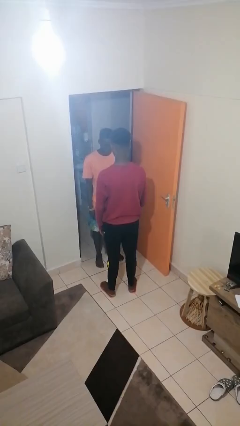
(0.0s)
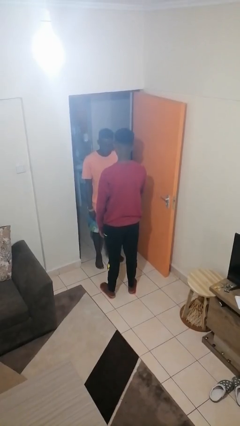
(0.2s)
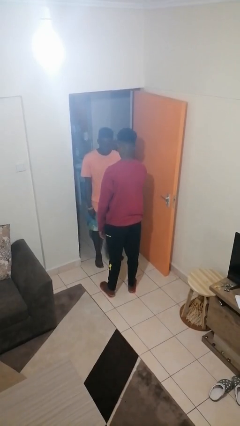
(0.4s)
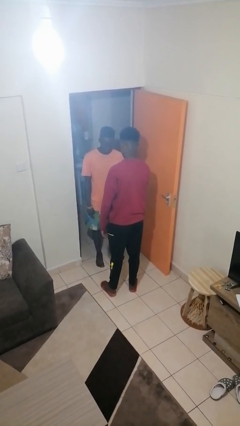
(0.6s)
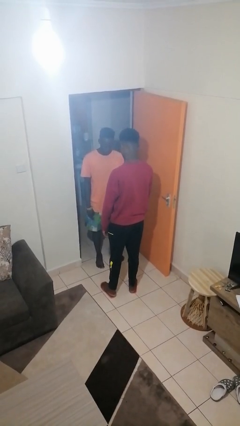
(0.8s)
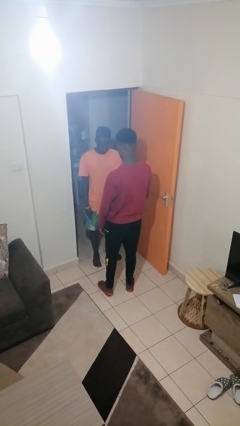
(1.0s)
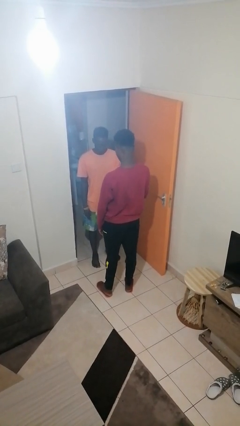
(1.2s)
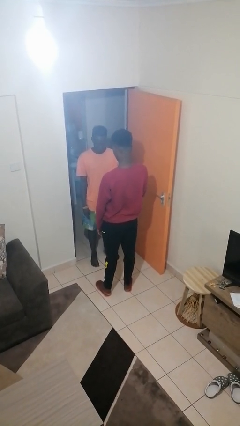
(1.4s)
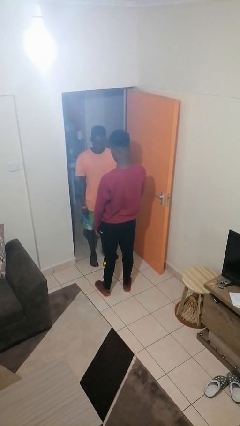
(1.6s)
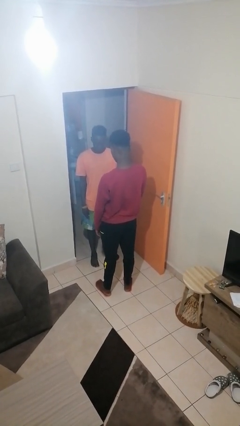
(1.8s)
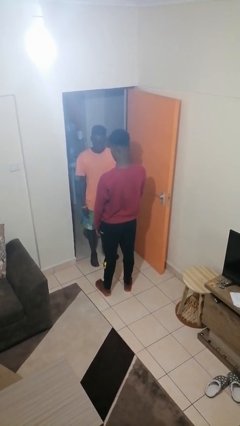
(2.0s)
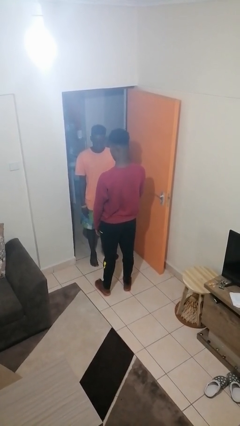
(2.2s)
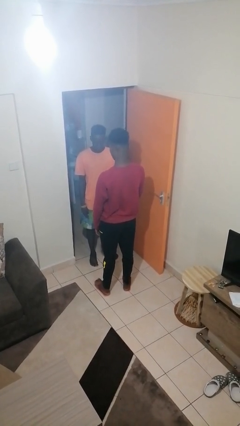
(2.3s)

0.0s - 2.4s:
person grabs person by forearm

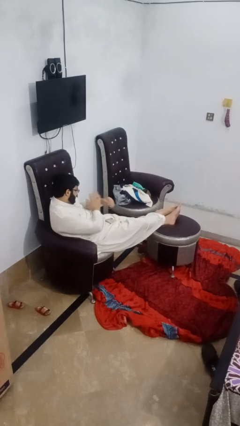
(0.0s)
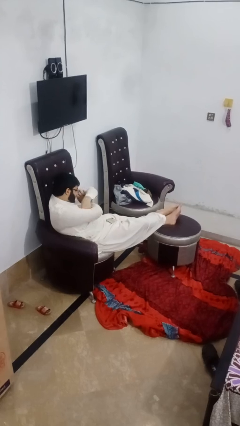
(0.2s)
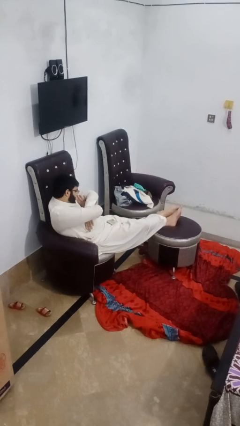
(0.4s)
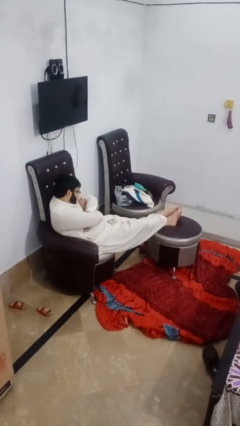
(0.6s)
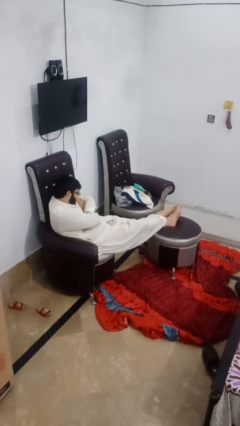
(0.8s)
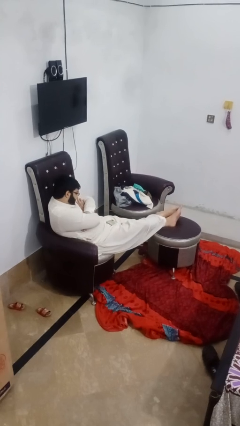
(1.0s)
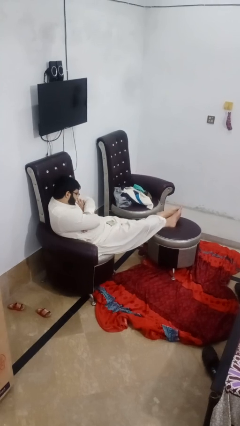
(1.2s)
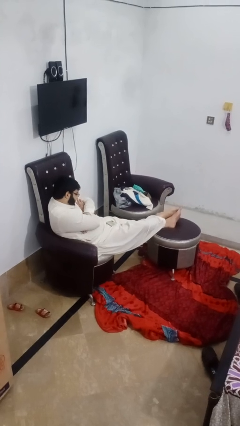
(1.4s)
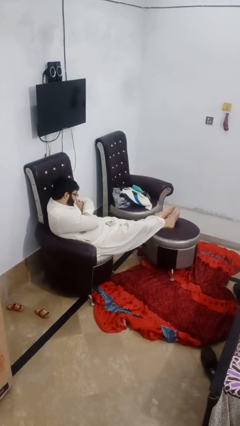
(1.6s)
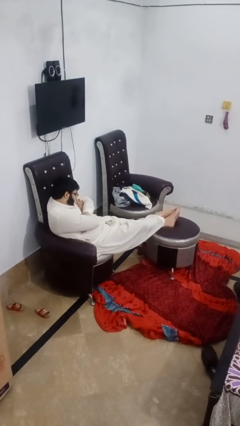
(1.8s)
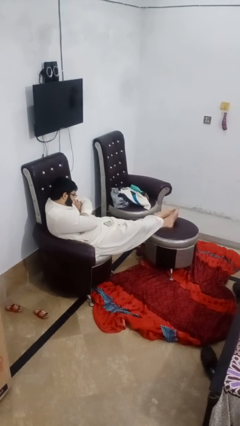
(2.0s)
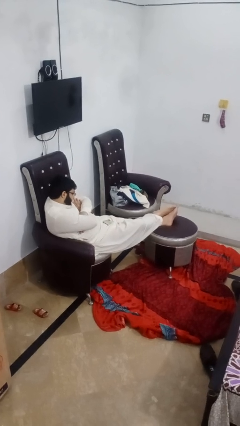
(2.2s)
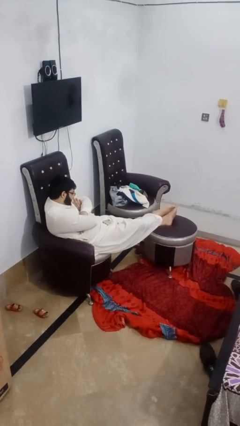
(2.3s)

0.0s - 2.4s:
person crosses arms

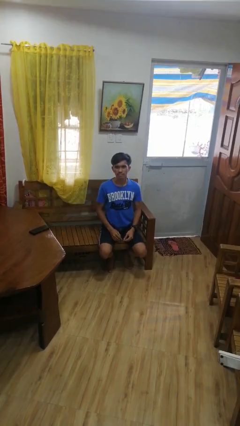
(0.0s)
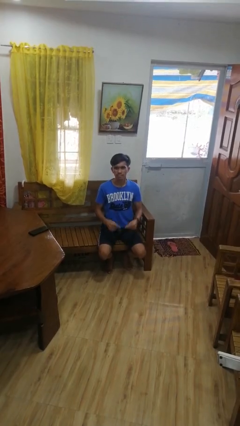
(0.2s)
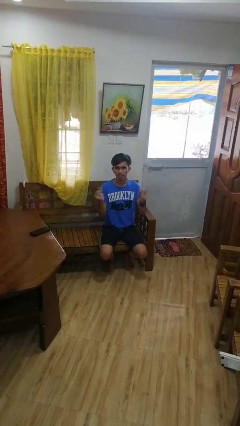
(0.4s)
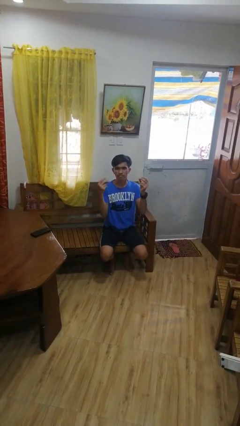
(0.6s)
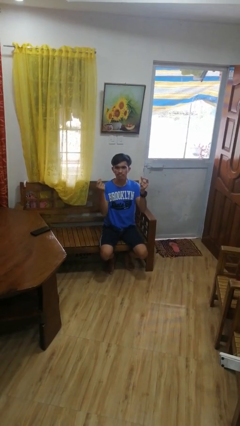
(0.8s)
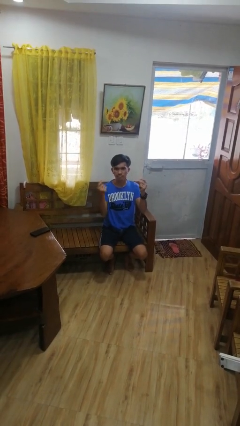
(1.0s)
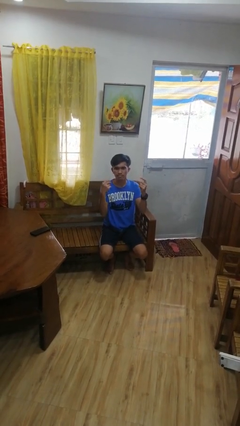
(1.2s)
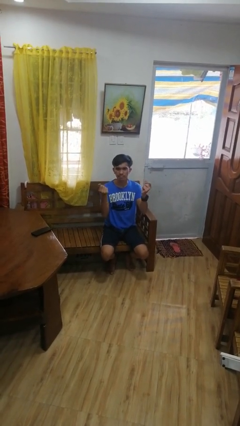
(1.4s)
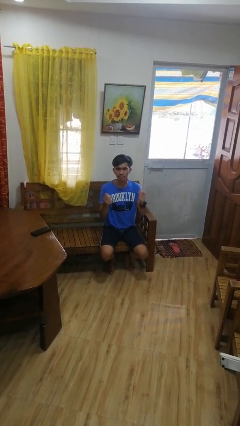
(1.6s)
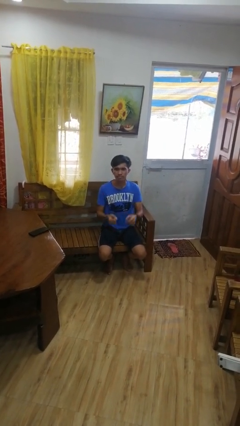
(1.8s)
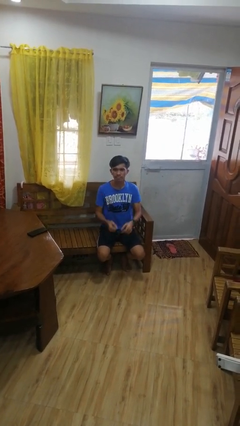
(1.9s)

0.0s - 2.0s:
person snaps fingers

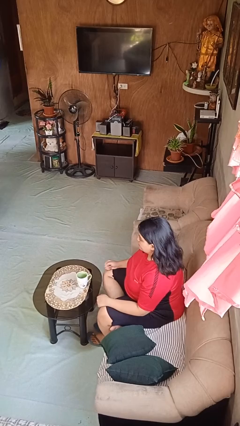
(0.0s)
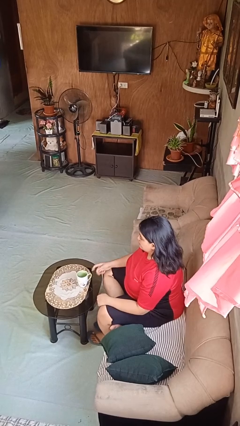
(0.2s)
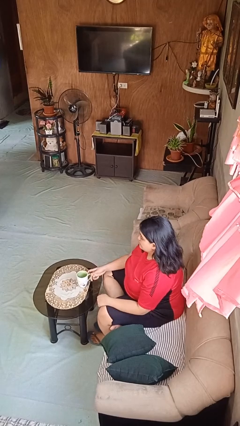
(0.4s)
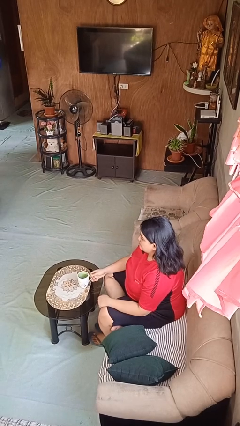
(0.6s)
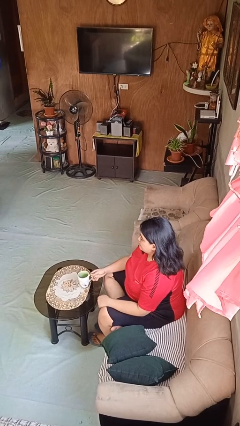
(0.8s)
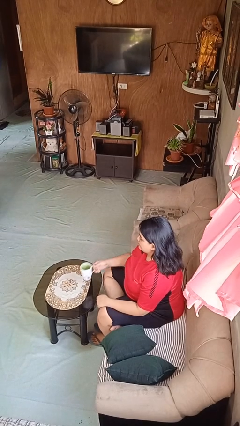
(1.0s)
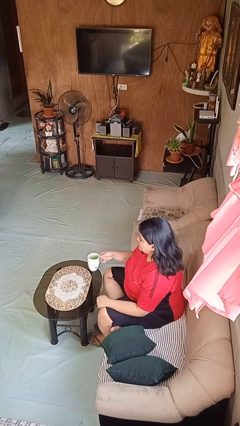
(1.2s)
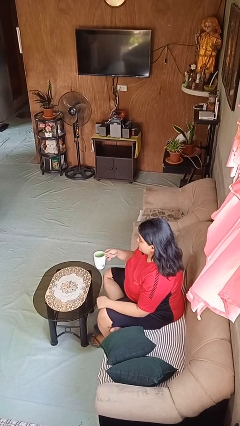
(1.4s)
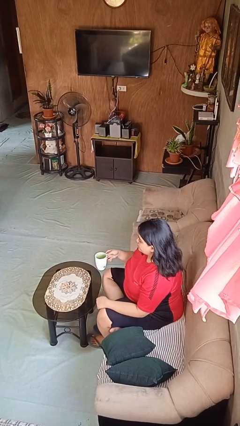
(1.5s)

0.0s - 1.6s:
person picks up object from table

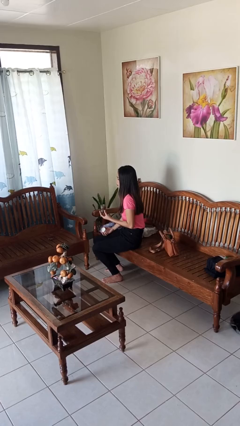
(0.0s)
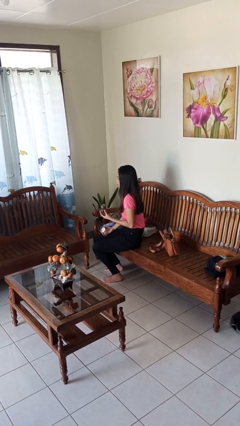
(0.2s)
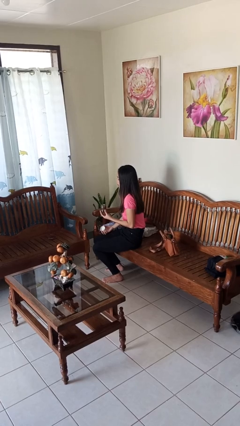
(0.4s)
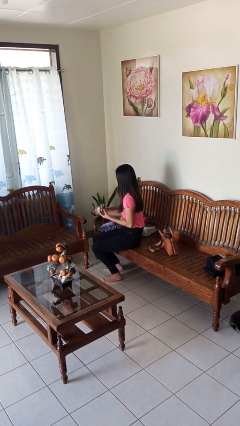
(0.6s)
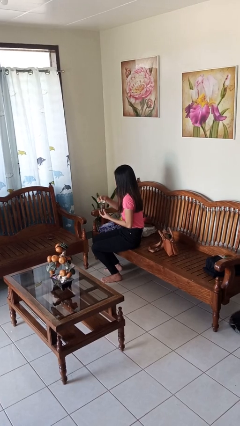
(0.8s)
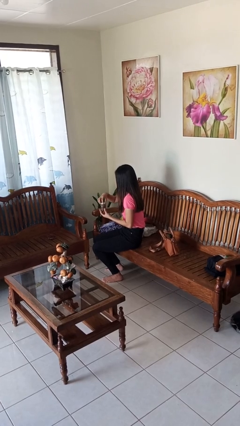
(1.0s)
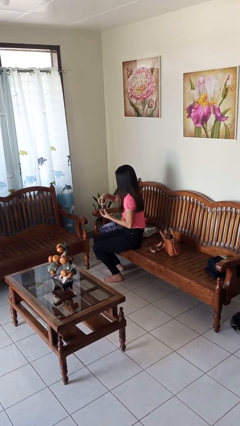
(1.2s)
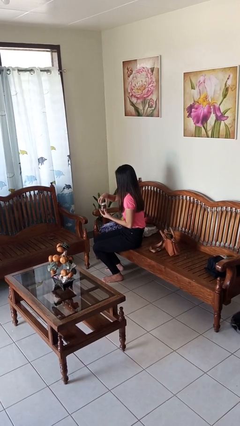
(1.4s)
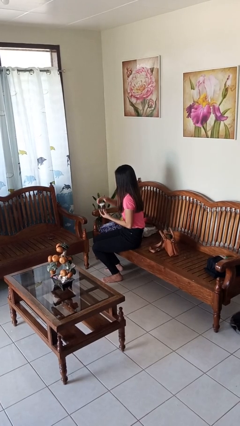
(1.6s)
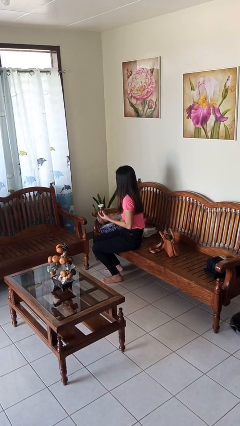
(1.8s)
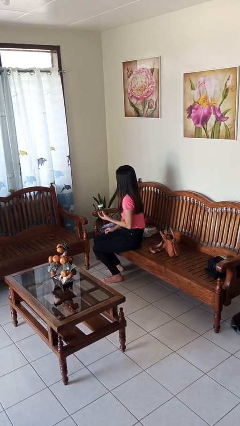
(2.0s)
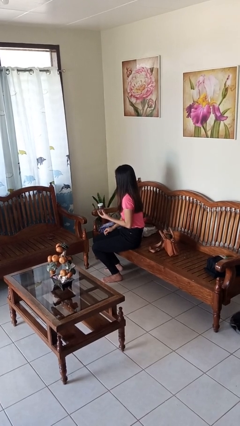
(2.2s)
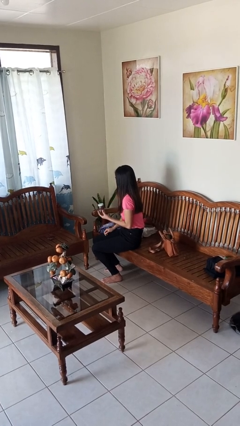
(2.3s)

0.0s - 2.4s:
person closes jar

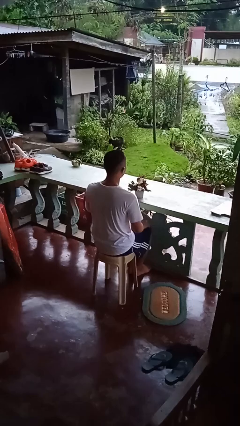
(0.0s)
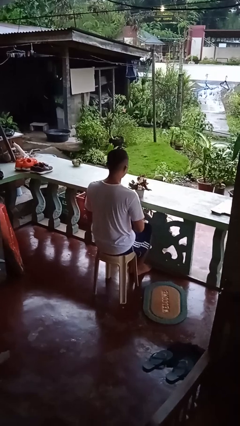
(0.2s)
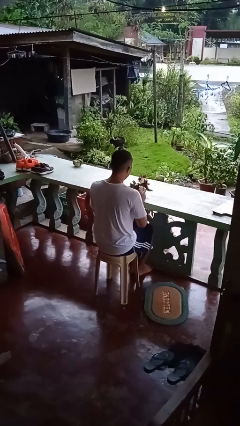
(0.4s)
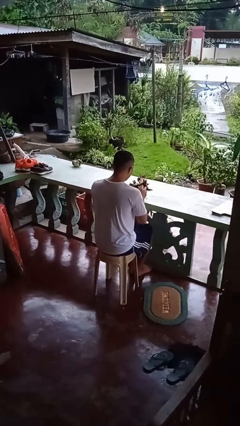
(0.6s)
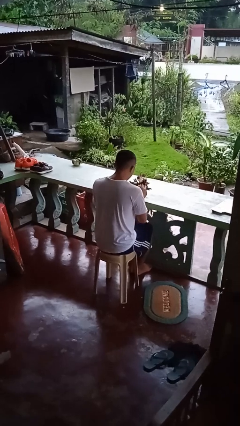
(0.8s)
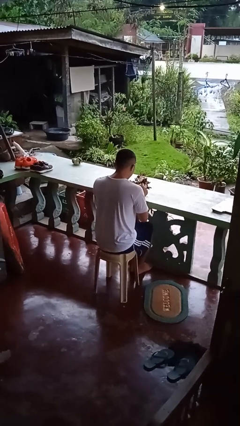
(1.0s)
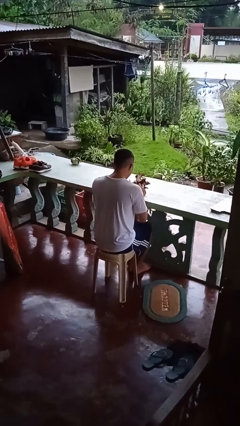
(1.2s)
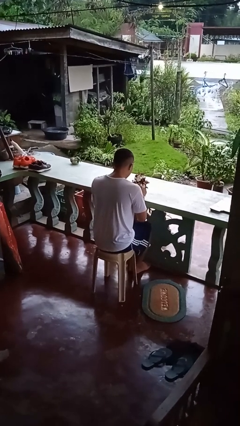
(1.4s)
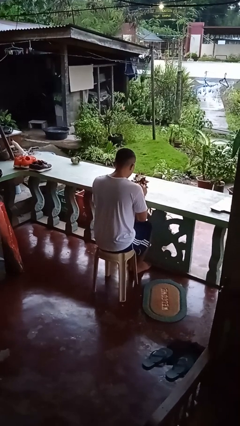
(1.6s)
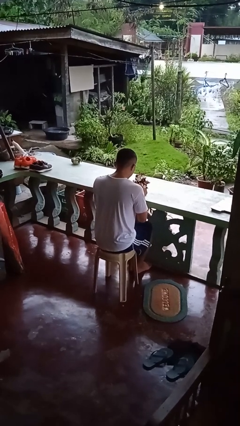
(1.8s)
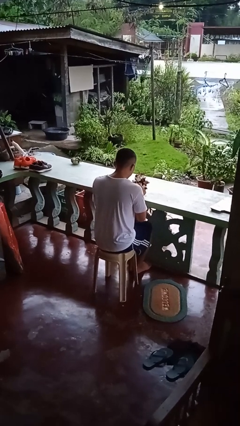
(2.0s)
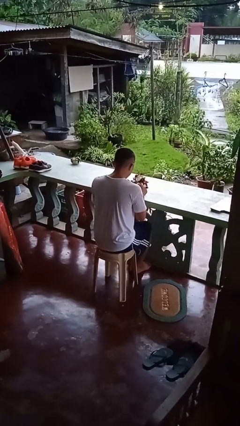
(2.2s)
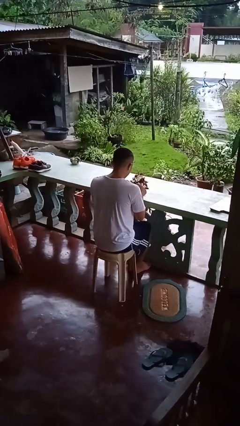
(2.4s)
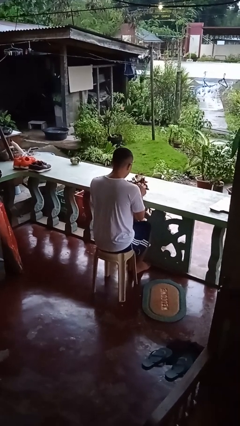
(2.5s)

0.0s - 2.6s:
person arranges flowers in vase

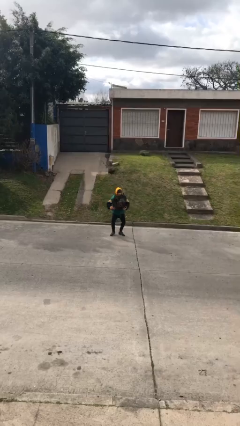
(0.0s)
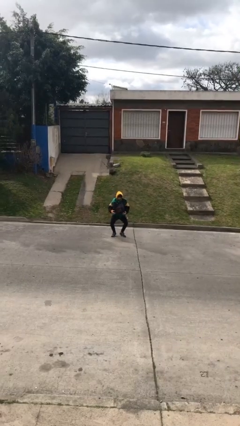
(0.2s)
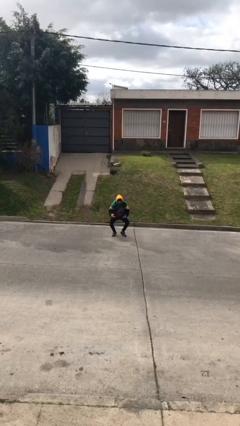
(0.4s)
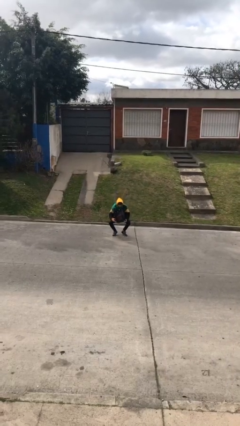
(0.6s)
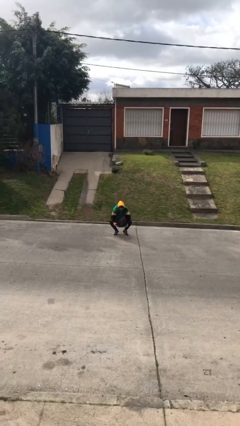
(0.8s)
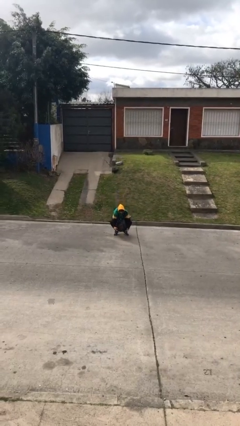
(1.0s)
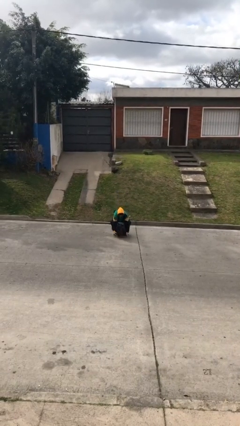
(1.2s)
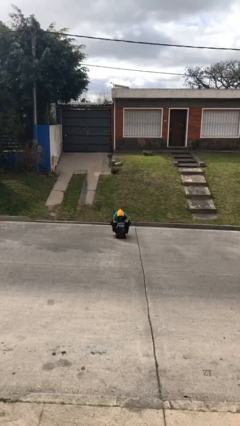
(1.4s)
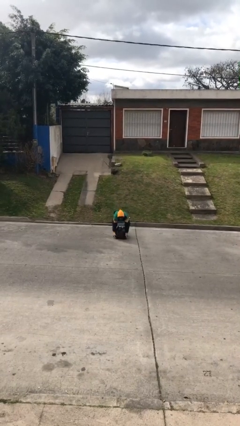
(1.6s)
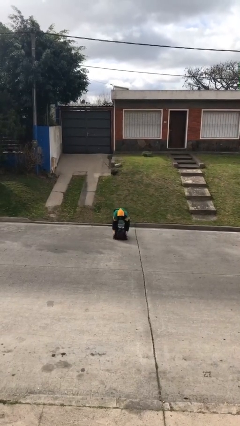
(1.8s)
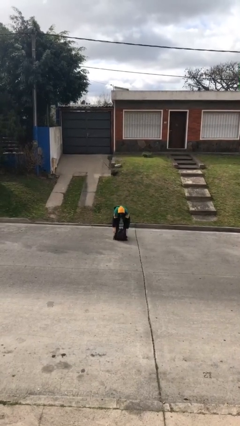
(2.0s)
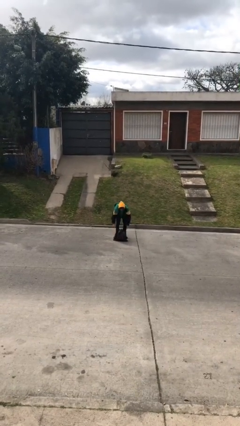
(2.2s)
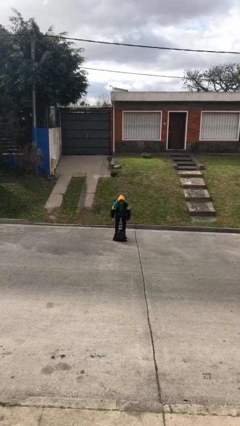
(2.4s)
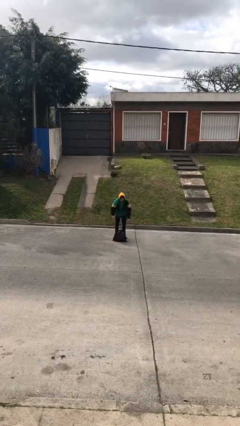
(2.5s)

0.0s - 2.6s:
person puts down object on floor

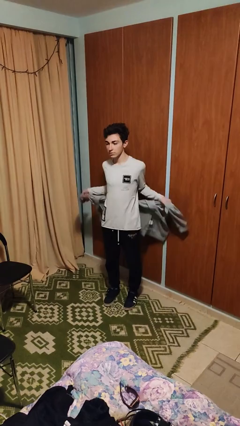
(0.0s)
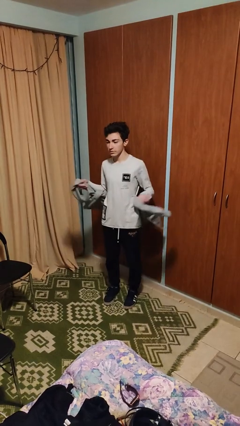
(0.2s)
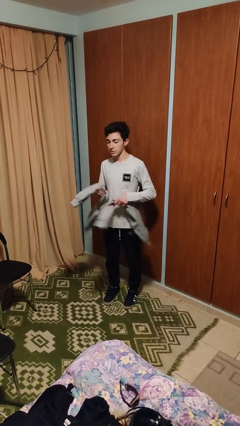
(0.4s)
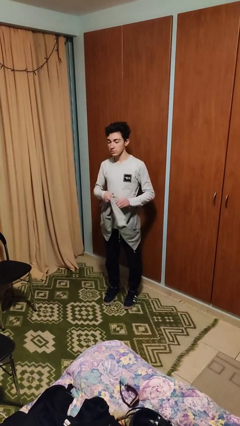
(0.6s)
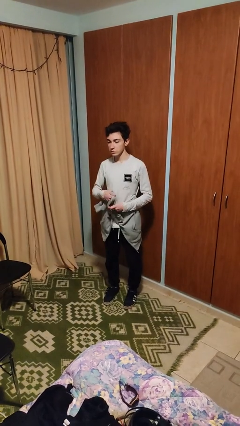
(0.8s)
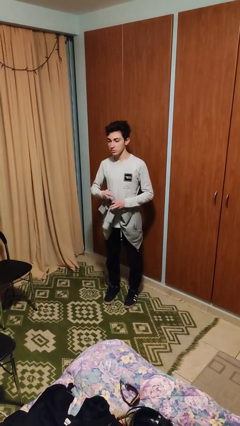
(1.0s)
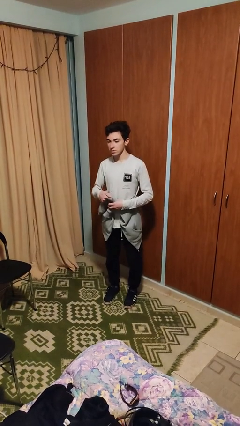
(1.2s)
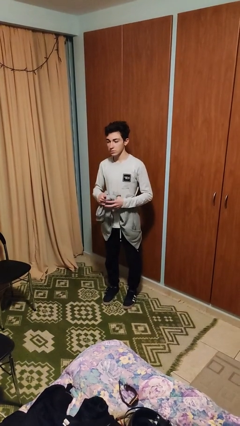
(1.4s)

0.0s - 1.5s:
person ties jacket around waist
